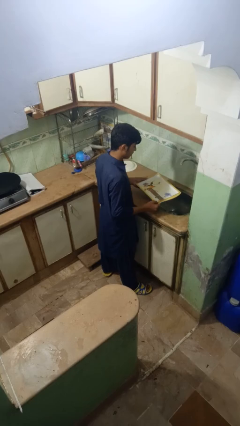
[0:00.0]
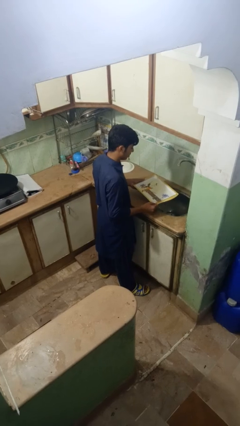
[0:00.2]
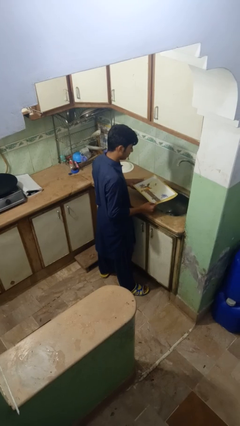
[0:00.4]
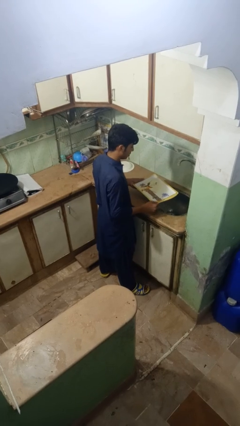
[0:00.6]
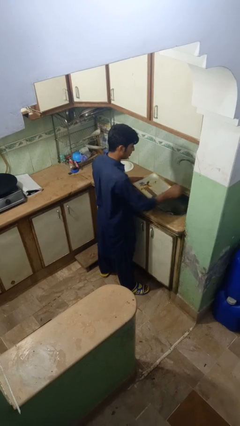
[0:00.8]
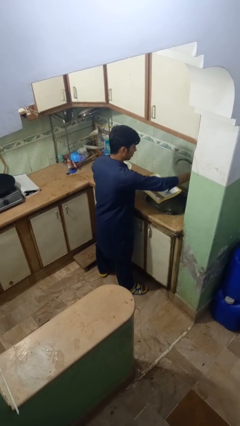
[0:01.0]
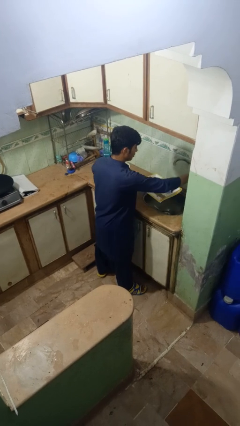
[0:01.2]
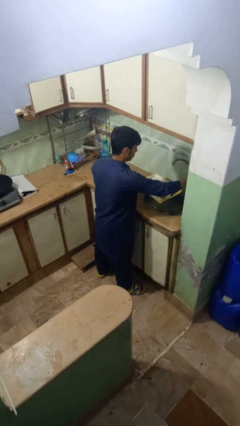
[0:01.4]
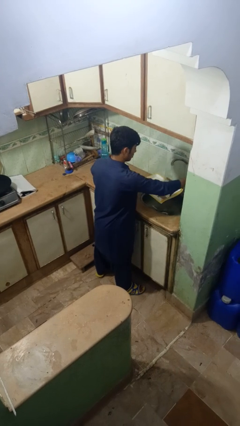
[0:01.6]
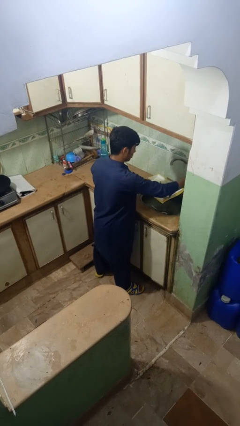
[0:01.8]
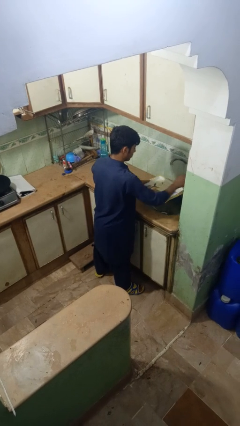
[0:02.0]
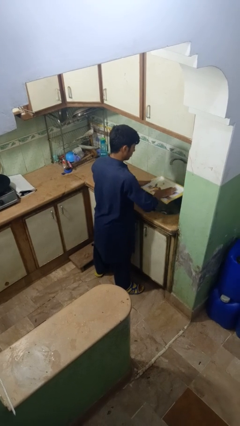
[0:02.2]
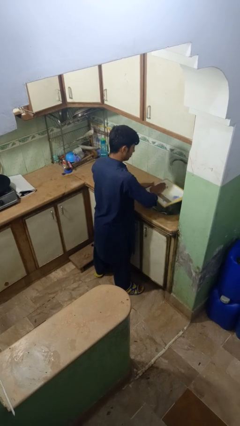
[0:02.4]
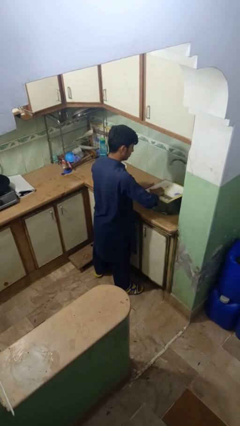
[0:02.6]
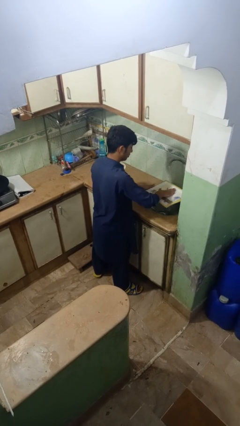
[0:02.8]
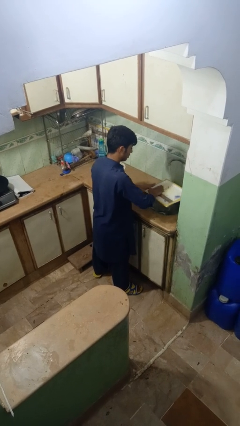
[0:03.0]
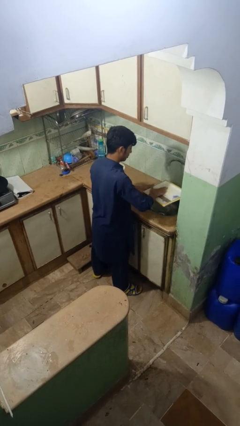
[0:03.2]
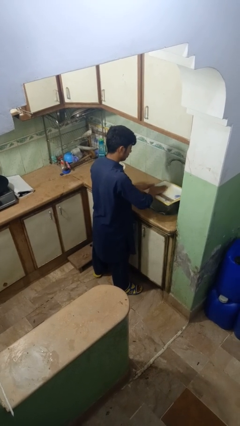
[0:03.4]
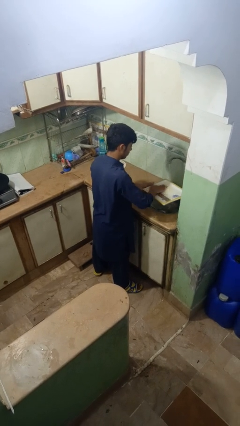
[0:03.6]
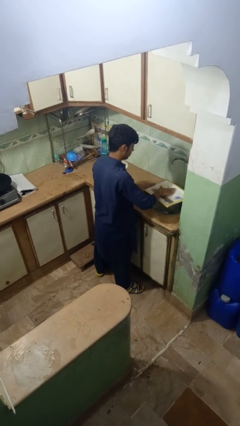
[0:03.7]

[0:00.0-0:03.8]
person washes dish

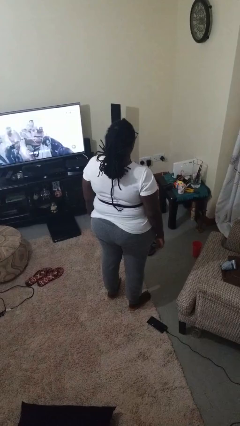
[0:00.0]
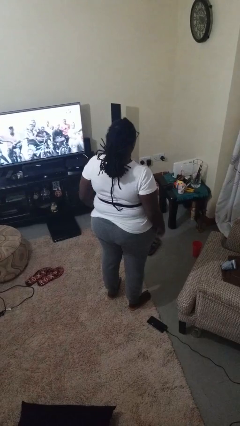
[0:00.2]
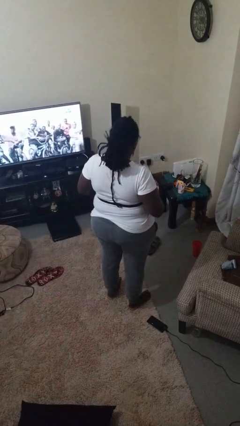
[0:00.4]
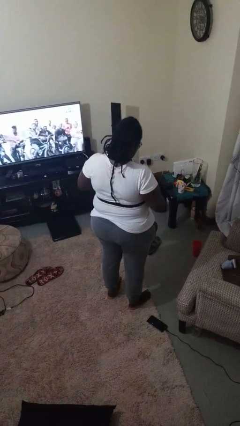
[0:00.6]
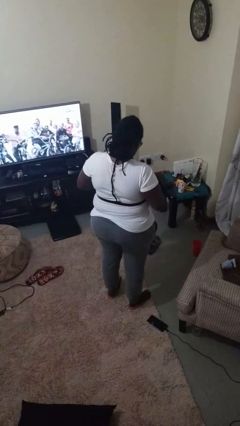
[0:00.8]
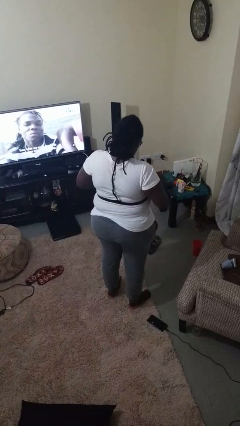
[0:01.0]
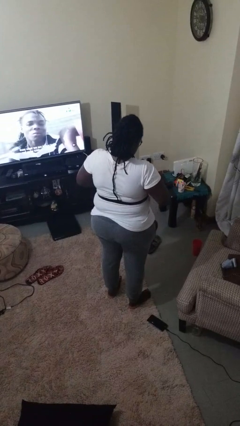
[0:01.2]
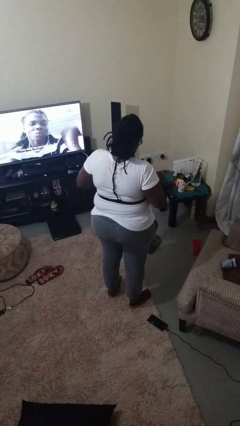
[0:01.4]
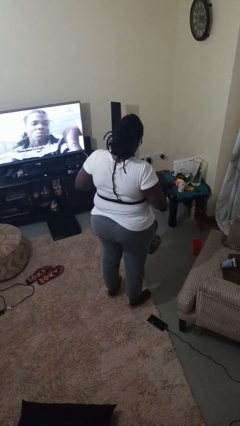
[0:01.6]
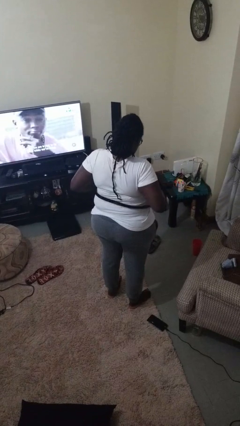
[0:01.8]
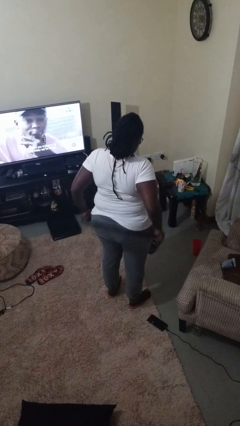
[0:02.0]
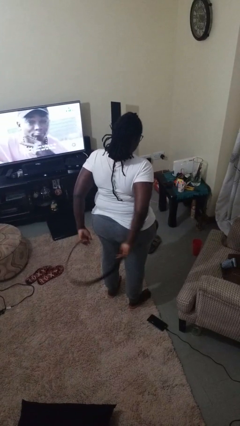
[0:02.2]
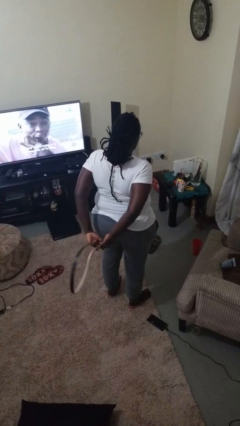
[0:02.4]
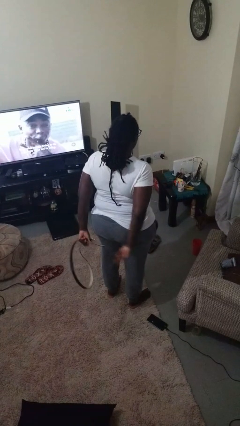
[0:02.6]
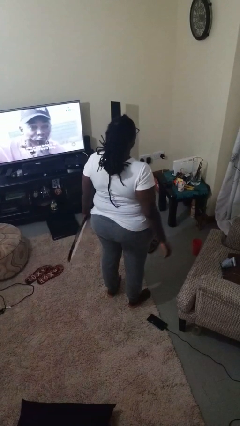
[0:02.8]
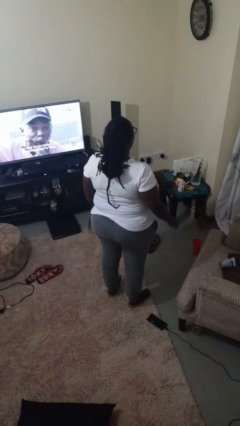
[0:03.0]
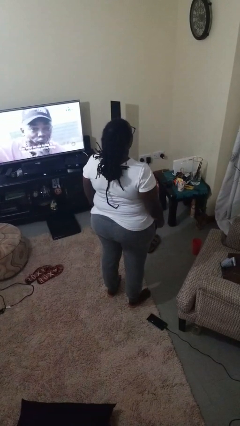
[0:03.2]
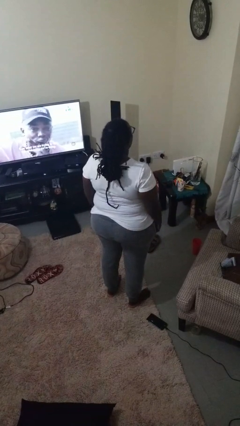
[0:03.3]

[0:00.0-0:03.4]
person takes off belt

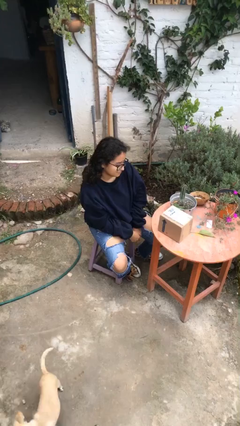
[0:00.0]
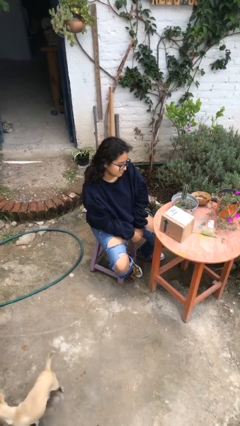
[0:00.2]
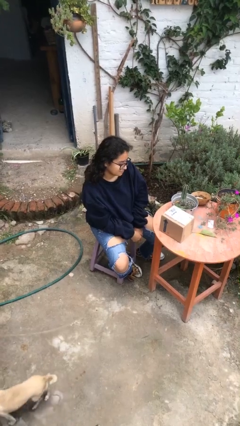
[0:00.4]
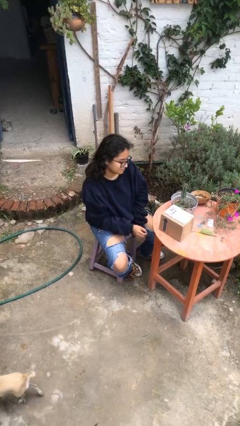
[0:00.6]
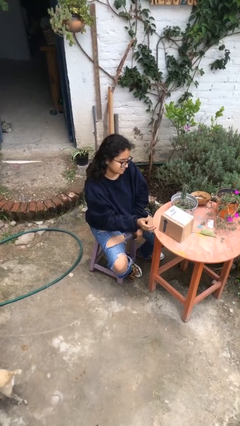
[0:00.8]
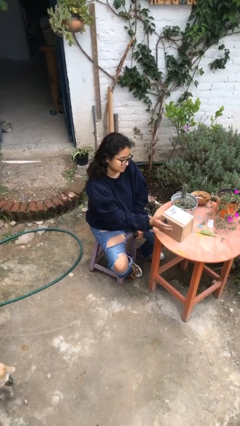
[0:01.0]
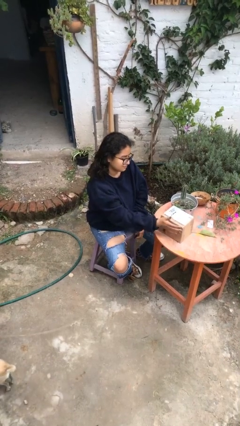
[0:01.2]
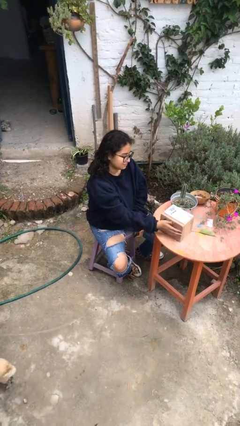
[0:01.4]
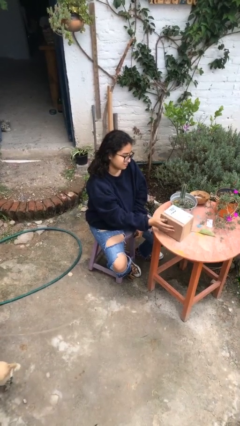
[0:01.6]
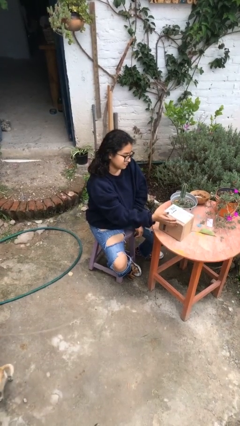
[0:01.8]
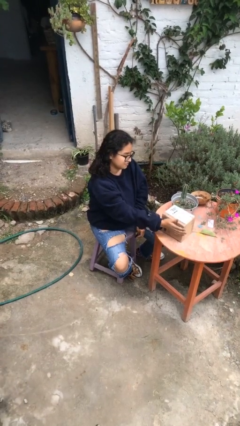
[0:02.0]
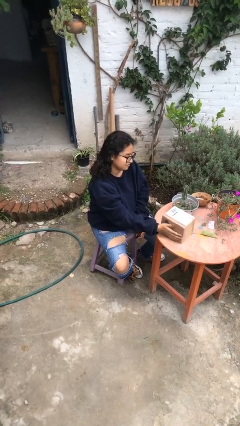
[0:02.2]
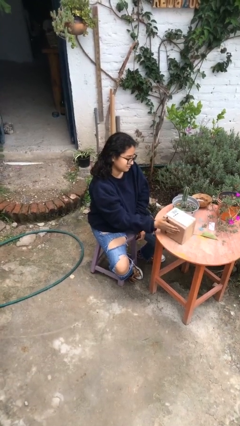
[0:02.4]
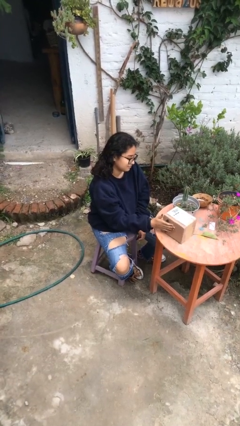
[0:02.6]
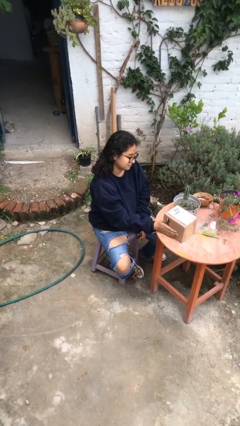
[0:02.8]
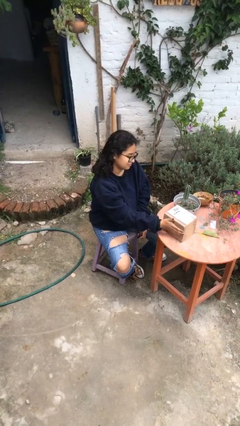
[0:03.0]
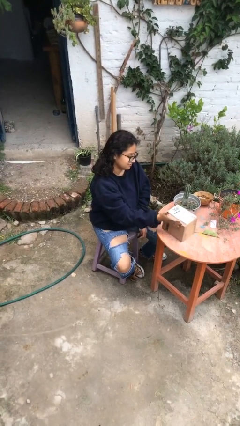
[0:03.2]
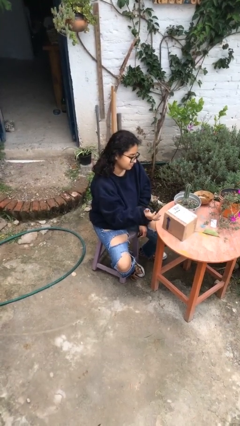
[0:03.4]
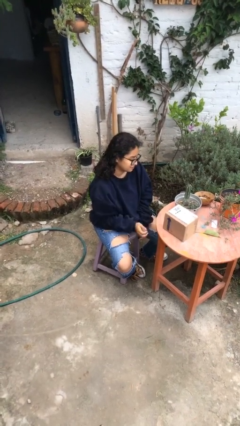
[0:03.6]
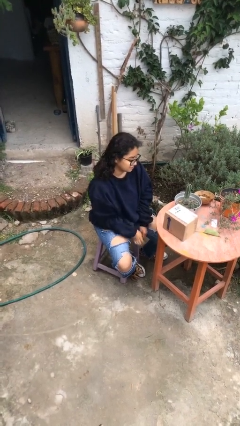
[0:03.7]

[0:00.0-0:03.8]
person waves hand over object

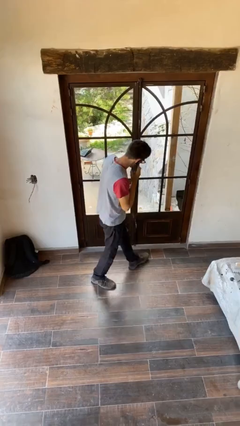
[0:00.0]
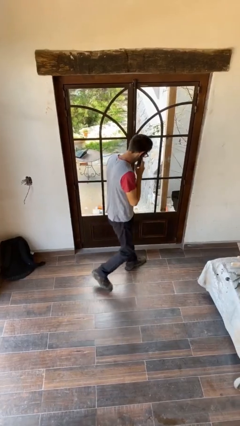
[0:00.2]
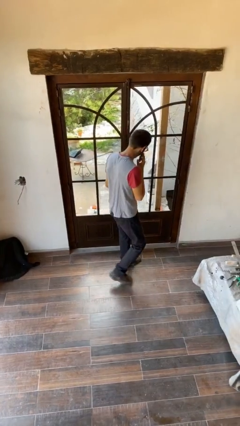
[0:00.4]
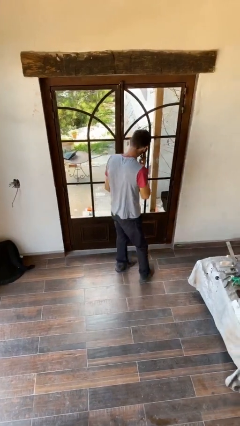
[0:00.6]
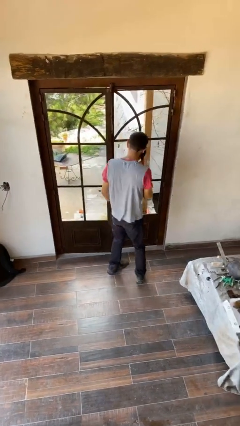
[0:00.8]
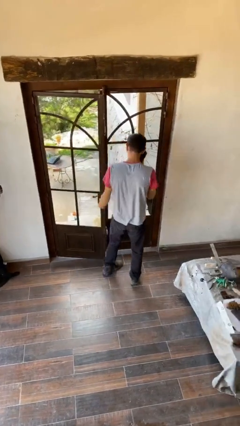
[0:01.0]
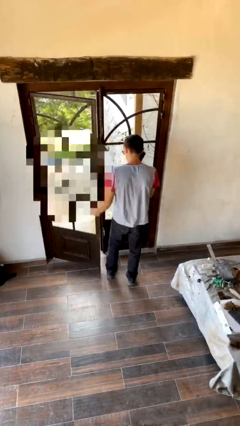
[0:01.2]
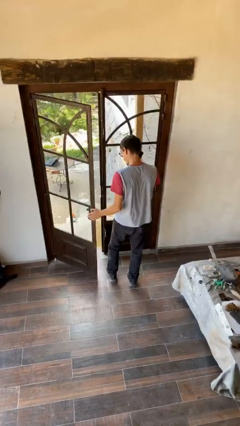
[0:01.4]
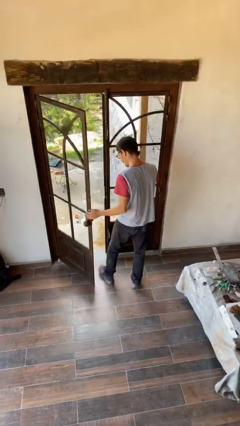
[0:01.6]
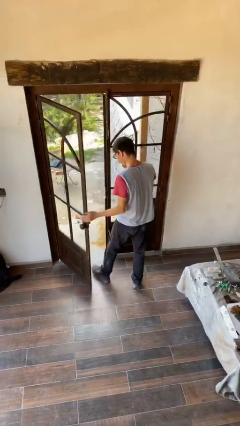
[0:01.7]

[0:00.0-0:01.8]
person opens facility door

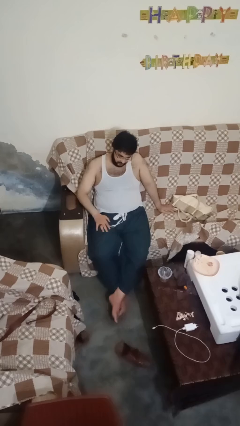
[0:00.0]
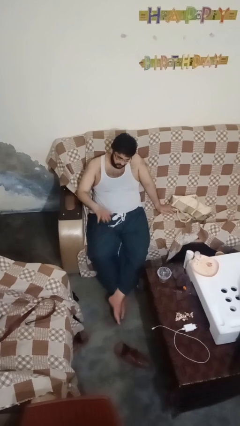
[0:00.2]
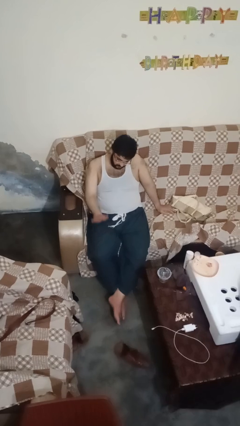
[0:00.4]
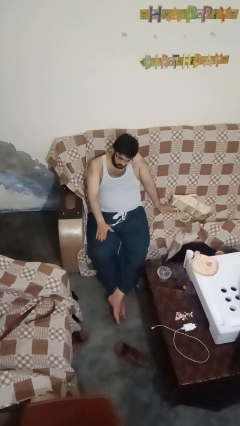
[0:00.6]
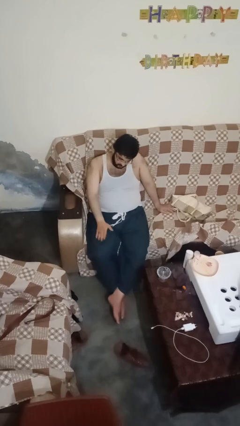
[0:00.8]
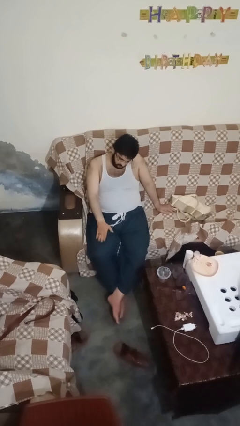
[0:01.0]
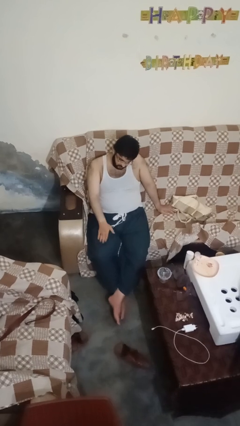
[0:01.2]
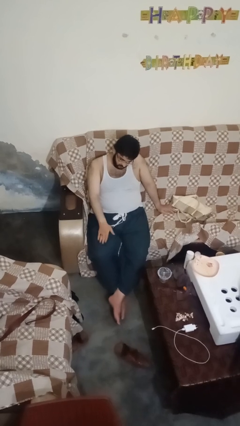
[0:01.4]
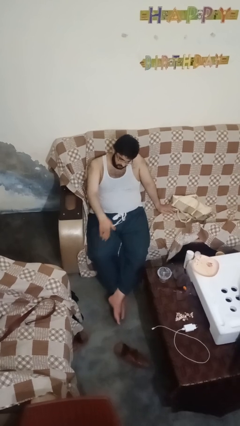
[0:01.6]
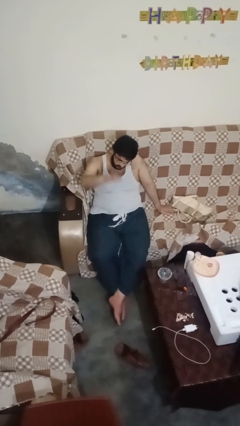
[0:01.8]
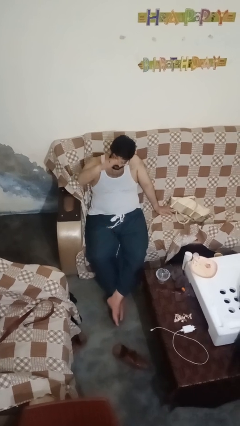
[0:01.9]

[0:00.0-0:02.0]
person slaps hands on thighs

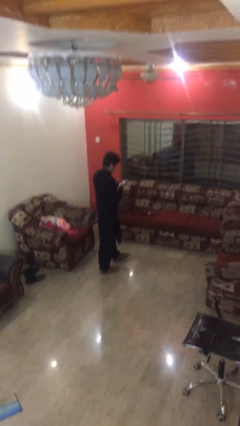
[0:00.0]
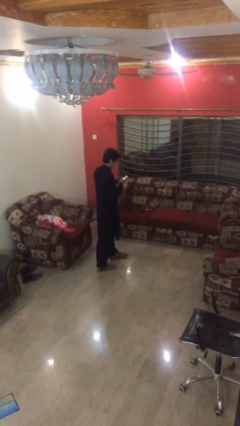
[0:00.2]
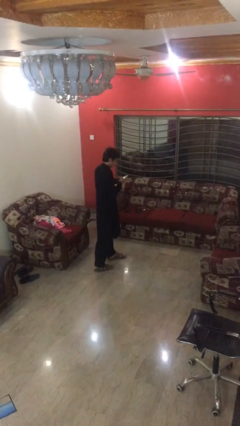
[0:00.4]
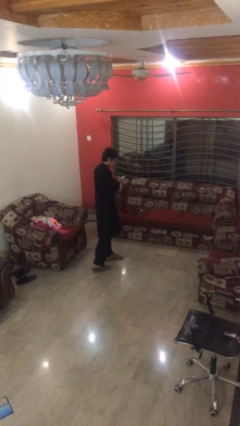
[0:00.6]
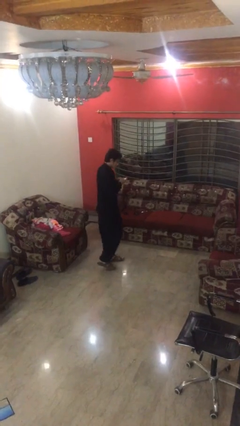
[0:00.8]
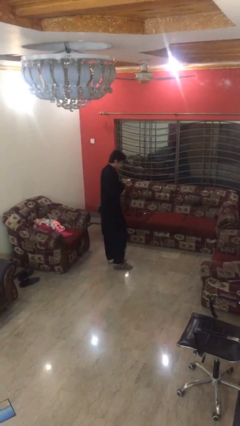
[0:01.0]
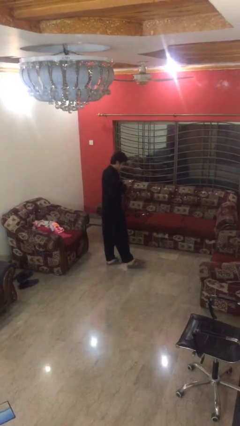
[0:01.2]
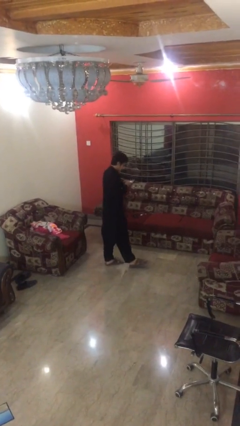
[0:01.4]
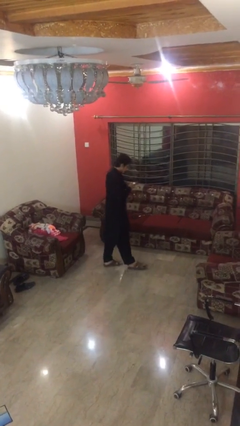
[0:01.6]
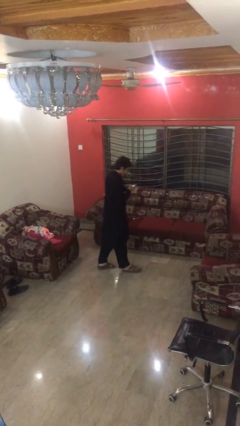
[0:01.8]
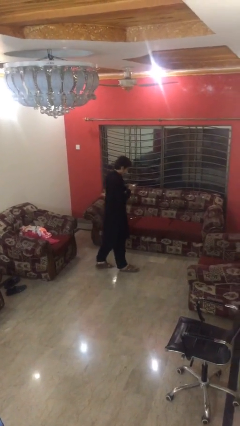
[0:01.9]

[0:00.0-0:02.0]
person texts on phone

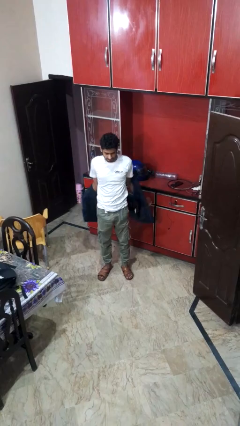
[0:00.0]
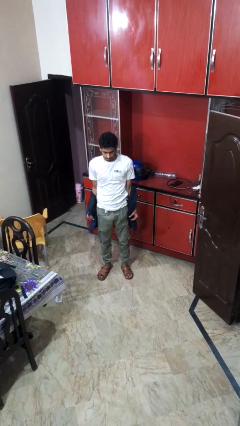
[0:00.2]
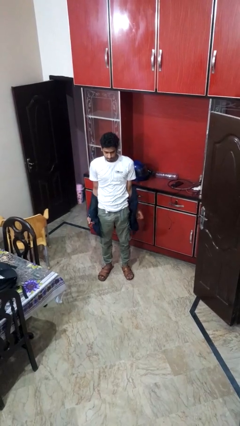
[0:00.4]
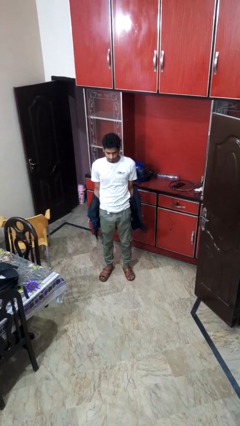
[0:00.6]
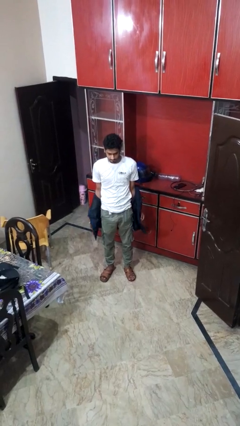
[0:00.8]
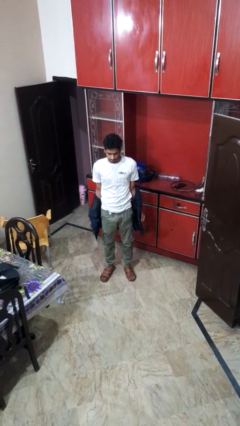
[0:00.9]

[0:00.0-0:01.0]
person takes off jacket
